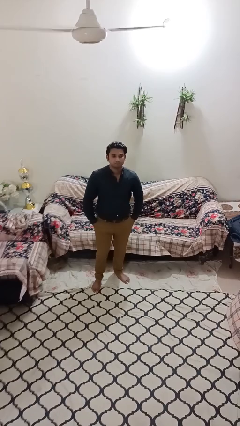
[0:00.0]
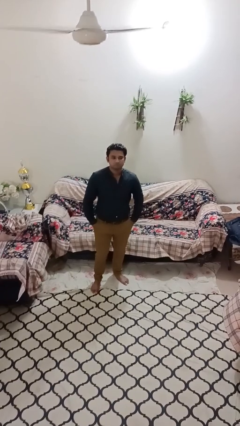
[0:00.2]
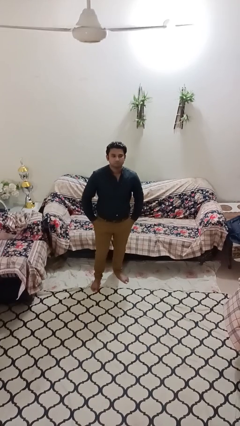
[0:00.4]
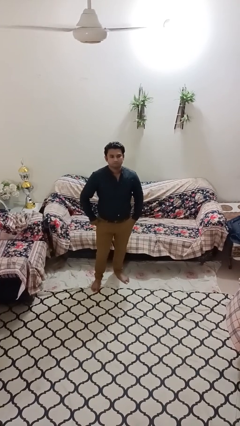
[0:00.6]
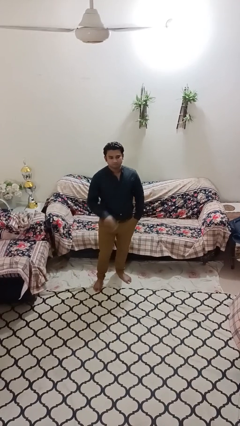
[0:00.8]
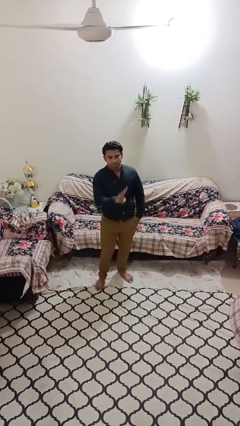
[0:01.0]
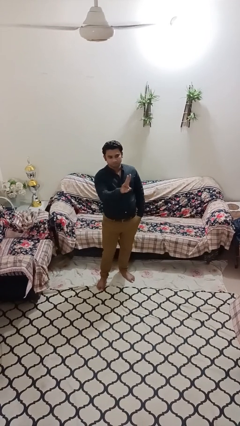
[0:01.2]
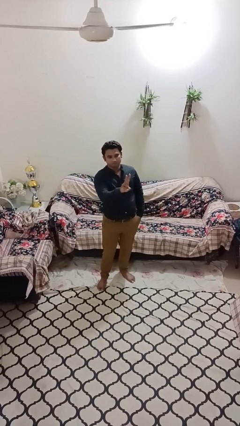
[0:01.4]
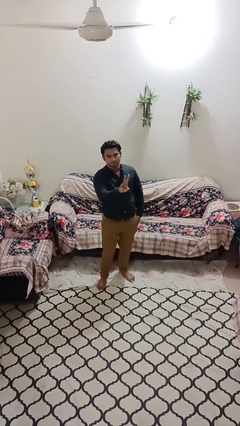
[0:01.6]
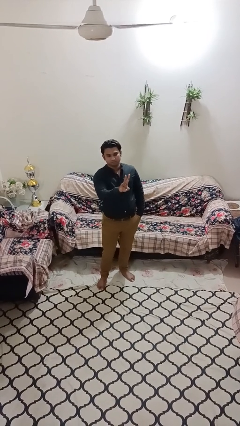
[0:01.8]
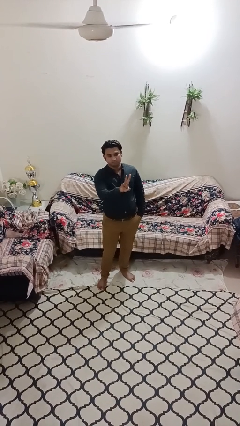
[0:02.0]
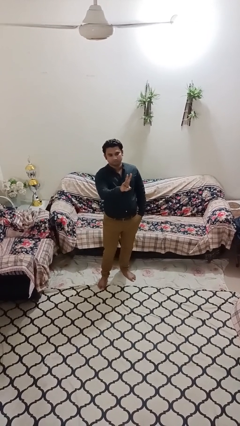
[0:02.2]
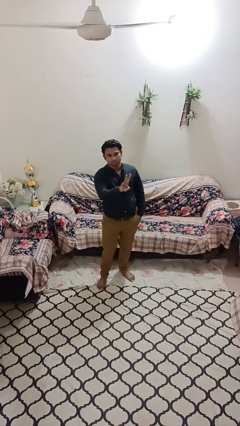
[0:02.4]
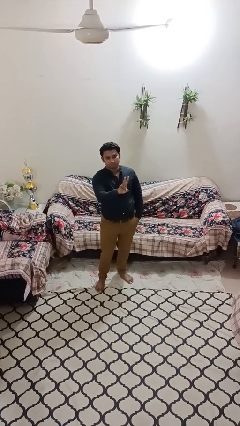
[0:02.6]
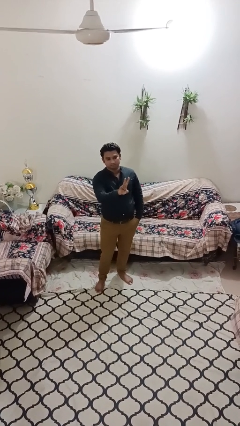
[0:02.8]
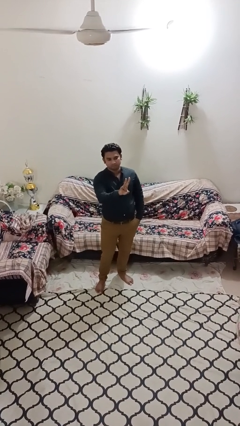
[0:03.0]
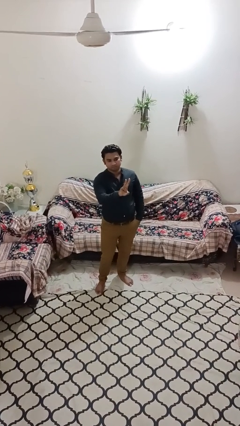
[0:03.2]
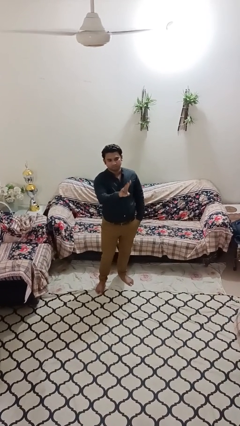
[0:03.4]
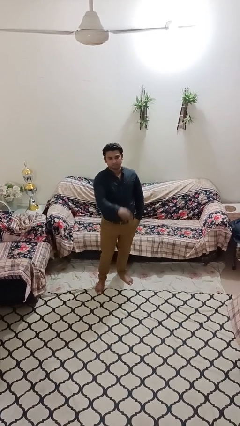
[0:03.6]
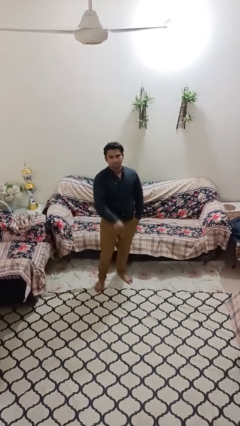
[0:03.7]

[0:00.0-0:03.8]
person gestures peace

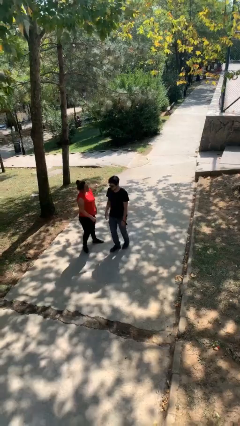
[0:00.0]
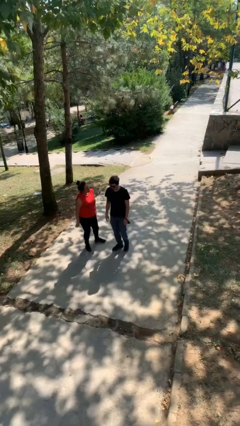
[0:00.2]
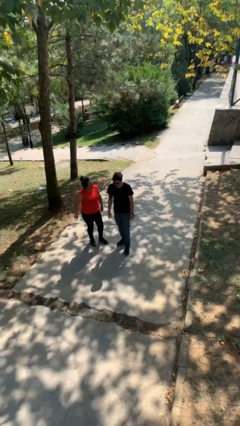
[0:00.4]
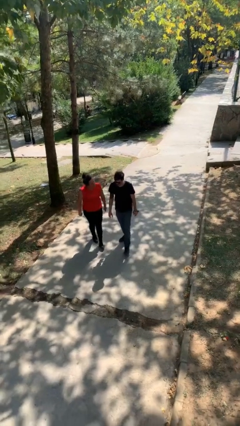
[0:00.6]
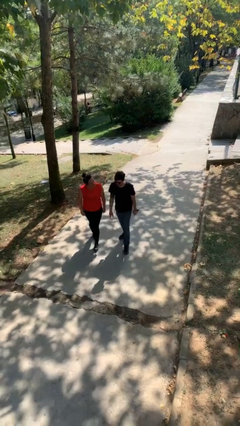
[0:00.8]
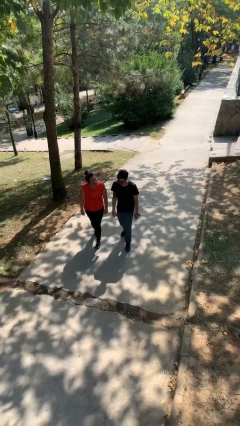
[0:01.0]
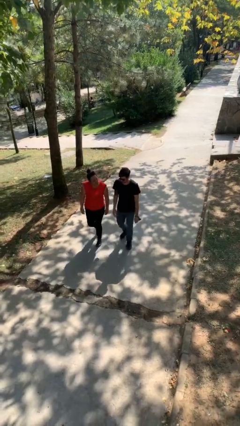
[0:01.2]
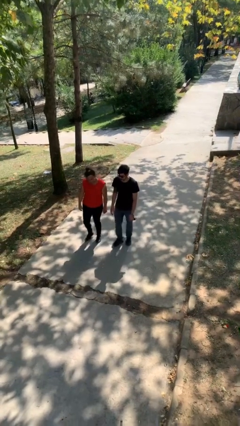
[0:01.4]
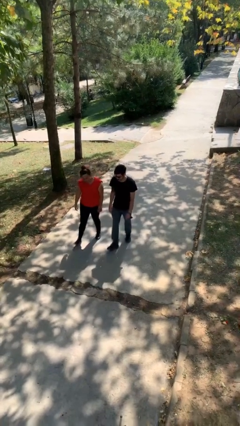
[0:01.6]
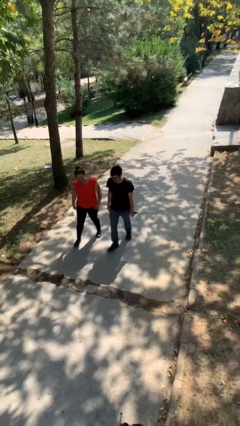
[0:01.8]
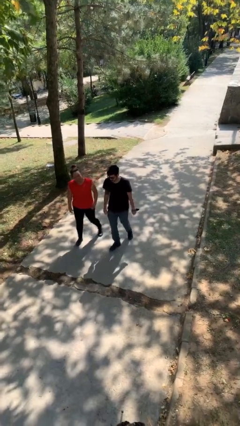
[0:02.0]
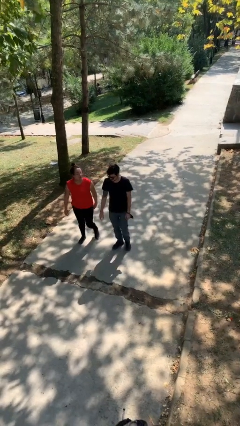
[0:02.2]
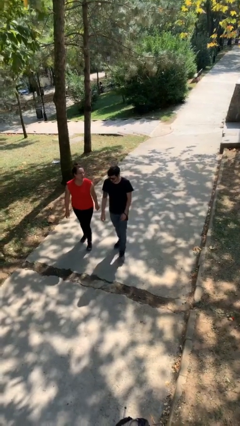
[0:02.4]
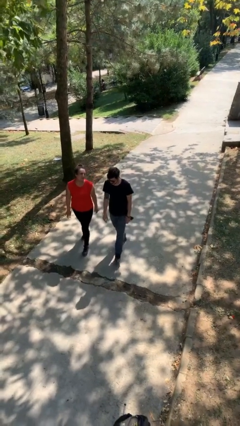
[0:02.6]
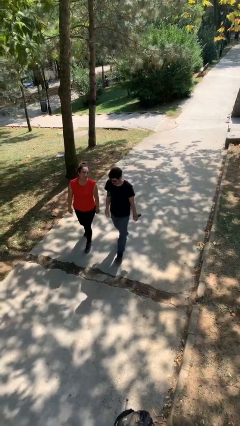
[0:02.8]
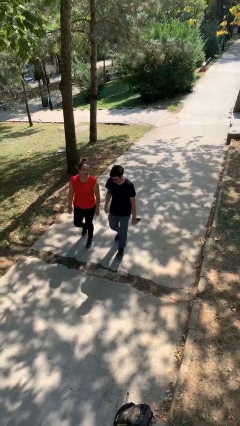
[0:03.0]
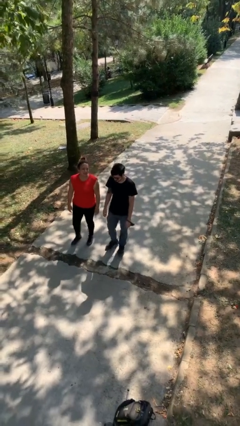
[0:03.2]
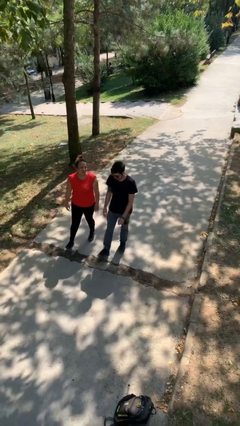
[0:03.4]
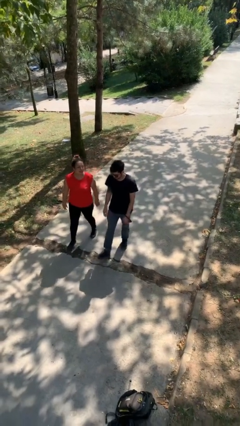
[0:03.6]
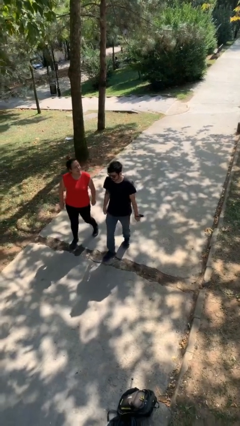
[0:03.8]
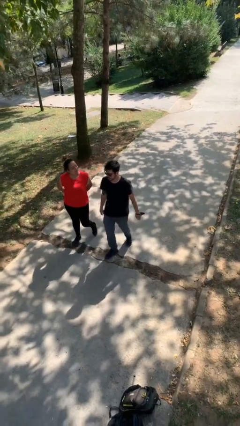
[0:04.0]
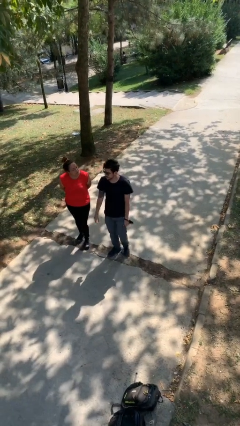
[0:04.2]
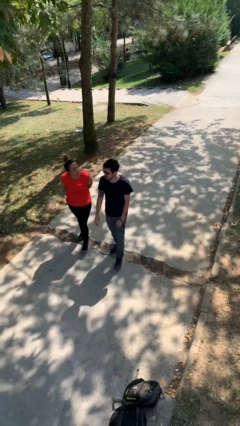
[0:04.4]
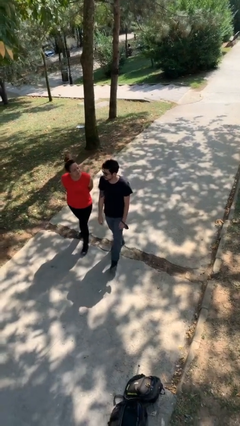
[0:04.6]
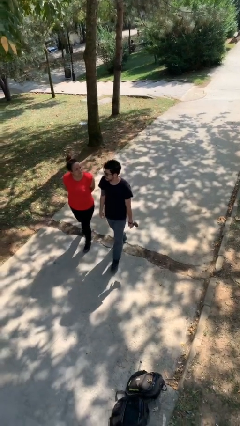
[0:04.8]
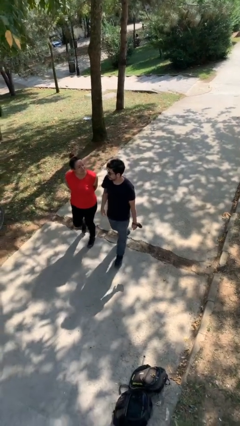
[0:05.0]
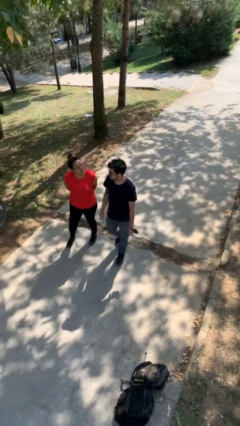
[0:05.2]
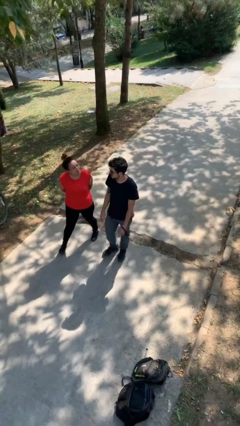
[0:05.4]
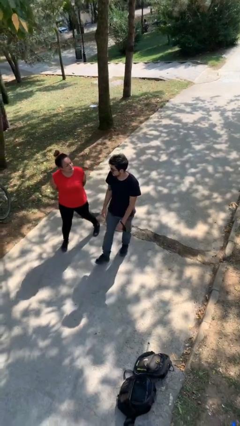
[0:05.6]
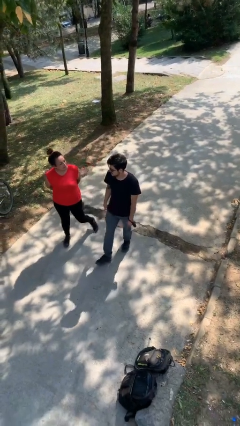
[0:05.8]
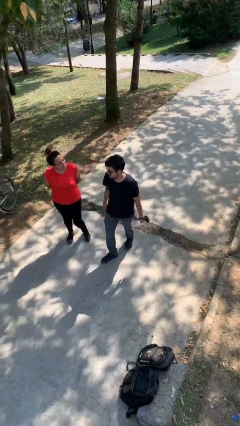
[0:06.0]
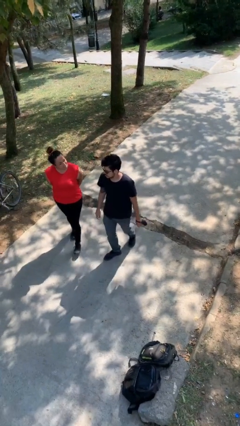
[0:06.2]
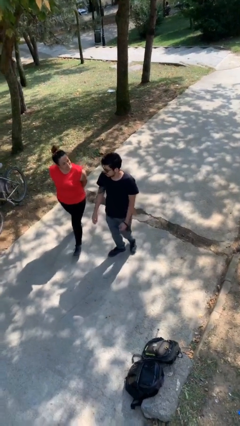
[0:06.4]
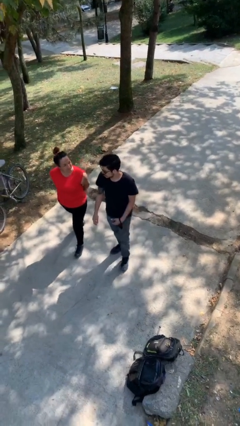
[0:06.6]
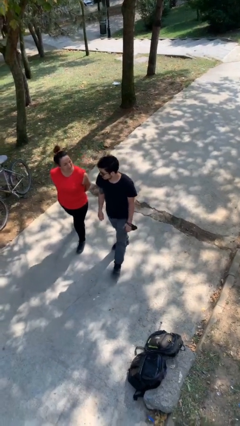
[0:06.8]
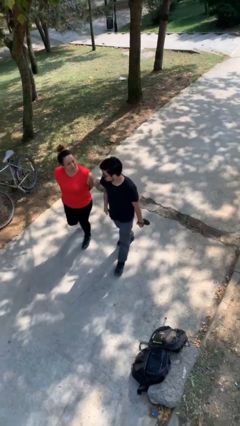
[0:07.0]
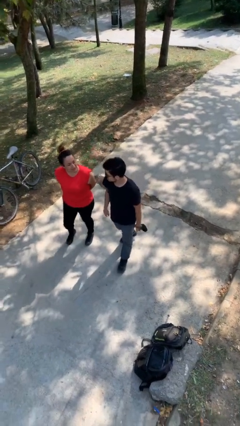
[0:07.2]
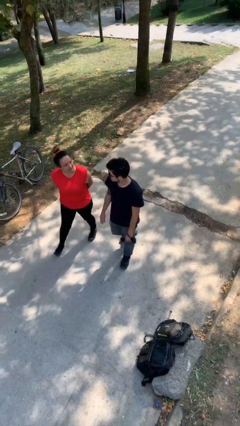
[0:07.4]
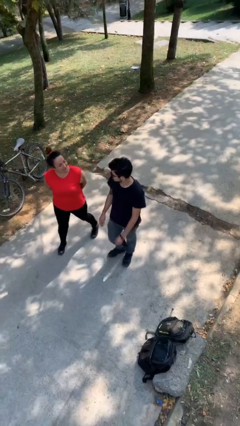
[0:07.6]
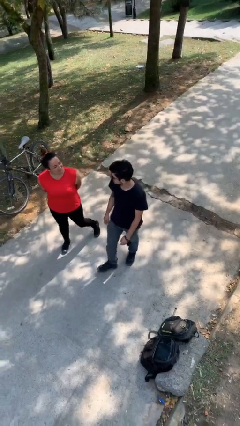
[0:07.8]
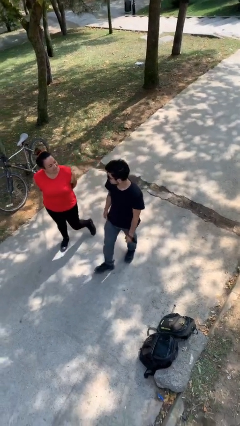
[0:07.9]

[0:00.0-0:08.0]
person talks to person

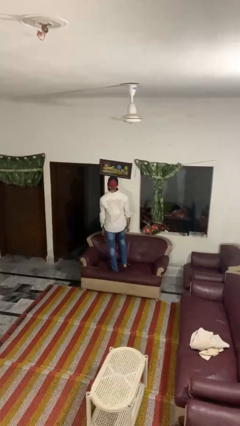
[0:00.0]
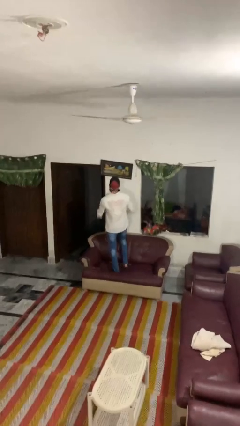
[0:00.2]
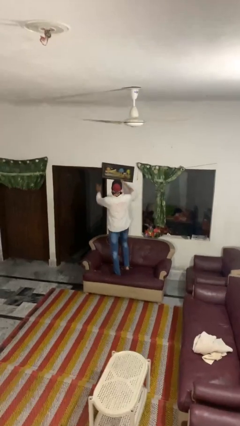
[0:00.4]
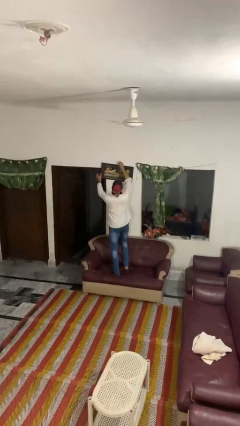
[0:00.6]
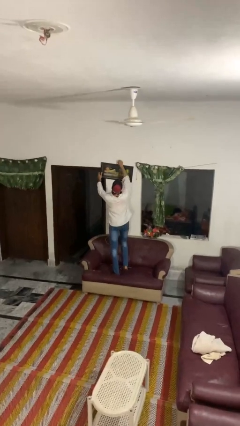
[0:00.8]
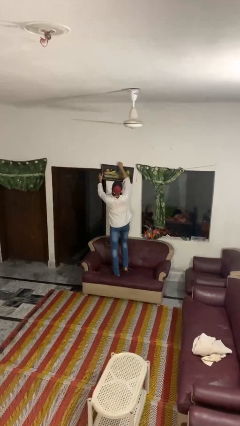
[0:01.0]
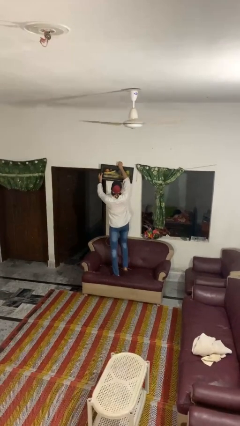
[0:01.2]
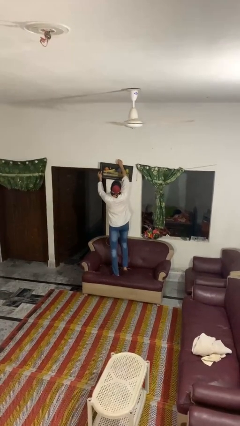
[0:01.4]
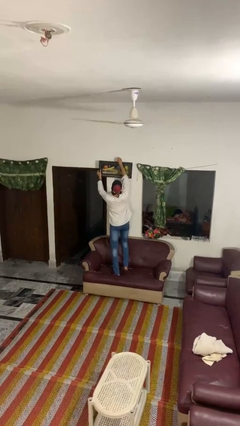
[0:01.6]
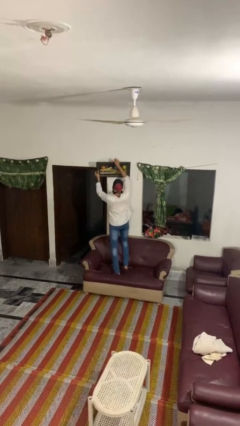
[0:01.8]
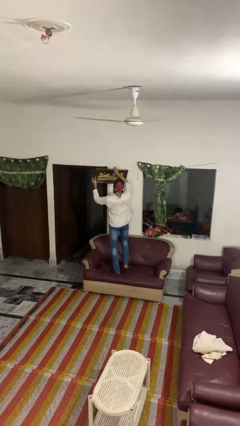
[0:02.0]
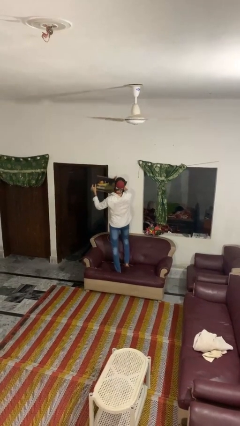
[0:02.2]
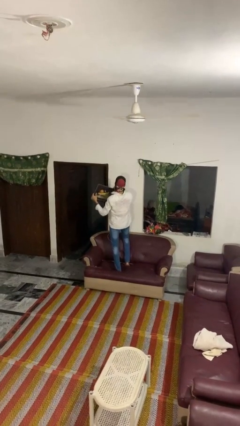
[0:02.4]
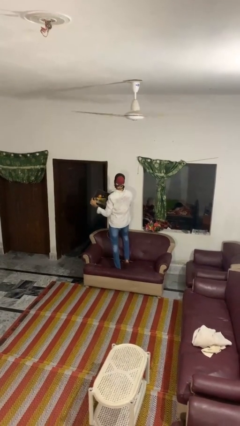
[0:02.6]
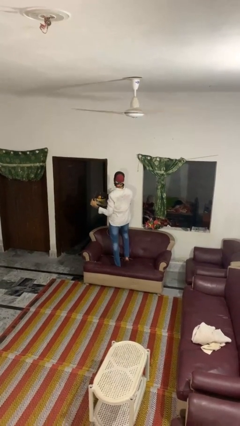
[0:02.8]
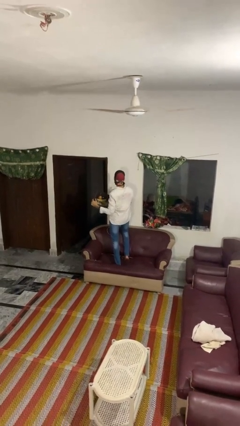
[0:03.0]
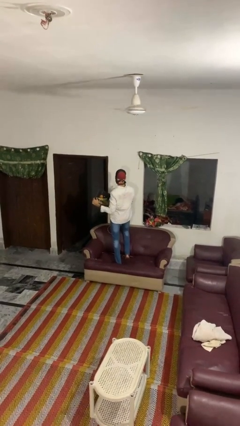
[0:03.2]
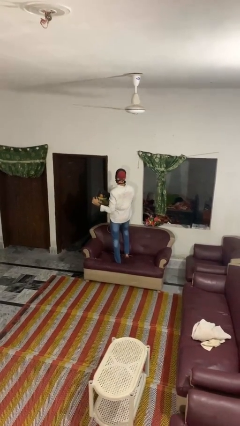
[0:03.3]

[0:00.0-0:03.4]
person takes down picture frame

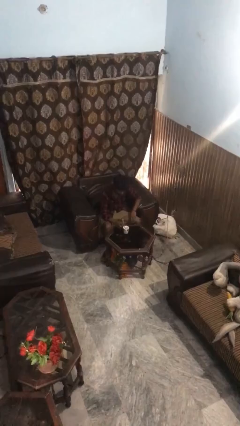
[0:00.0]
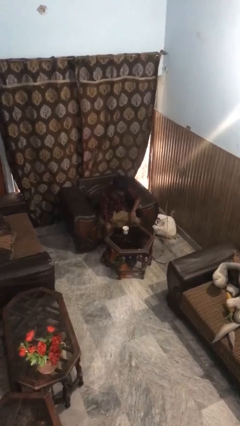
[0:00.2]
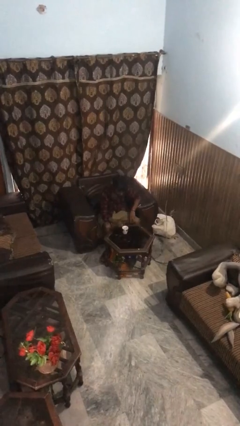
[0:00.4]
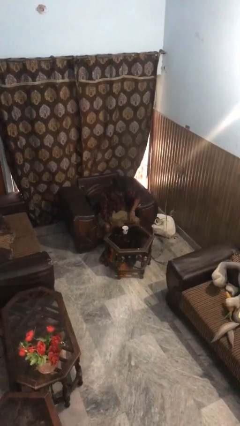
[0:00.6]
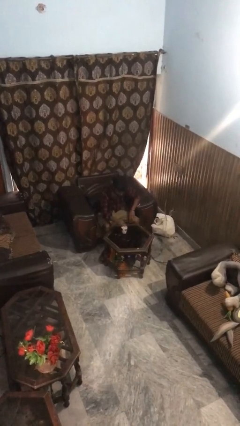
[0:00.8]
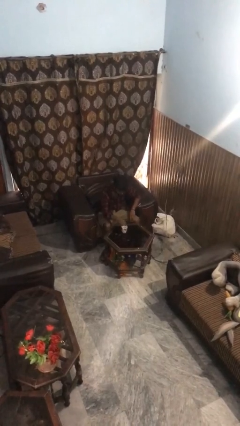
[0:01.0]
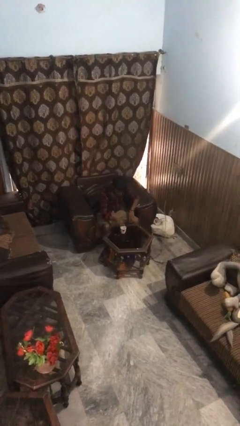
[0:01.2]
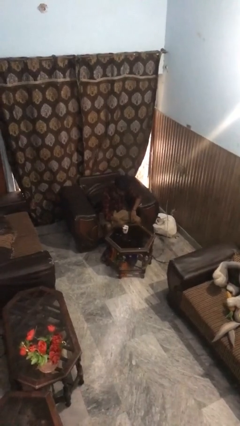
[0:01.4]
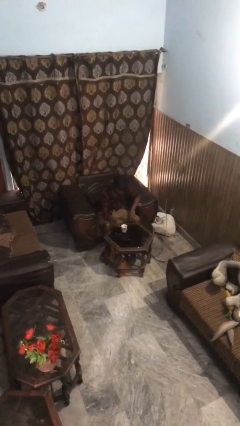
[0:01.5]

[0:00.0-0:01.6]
person stirs mug

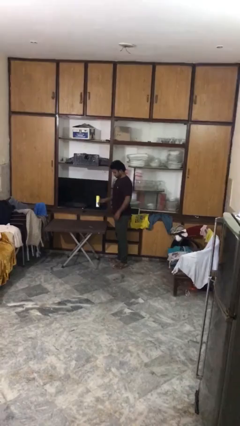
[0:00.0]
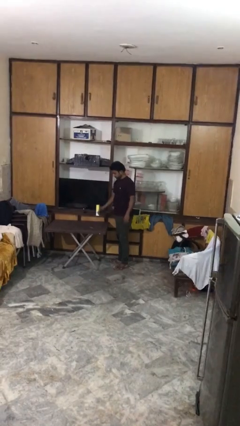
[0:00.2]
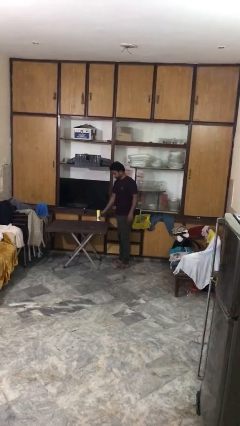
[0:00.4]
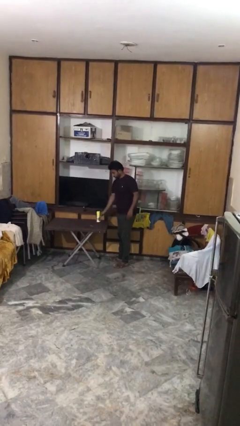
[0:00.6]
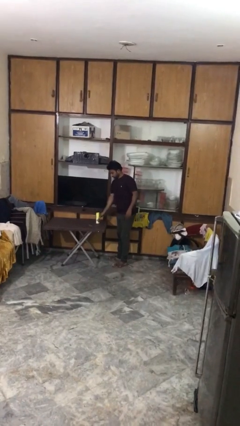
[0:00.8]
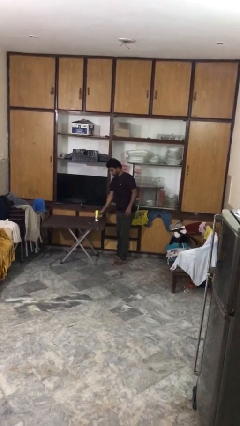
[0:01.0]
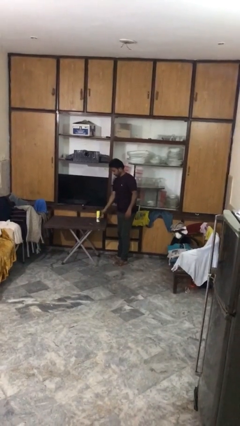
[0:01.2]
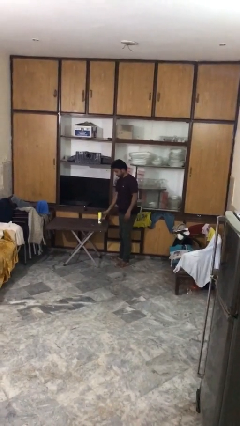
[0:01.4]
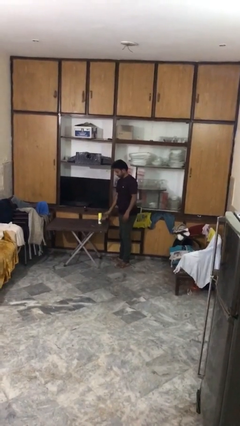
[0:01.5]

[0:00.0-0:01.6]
person puts down object on table
